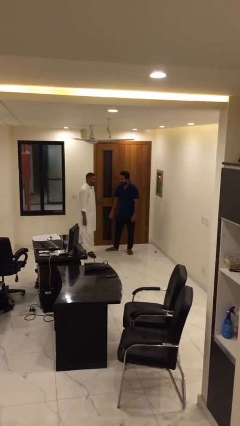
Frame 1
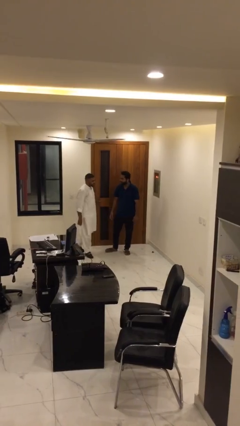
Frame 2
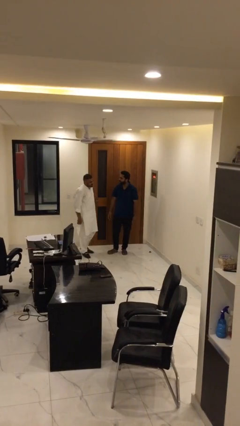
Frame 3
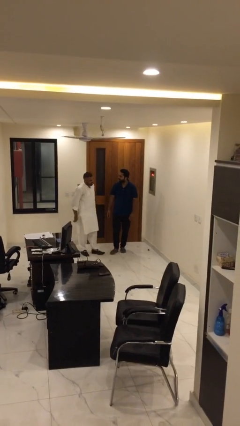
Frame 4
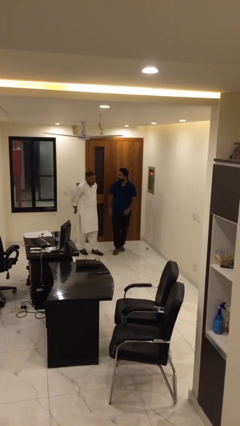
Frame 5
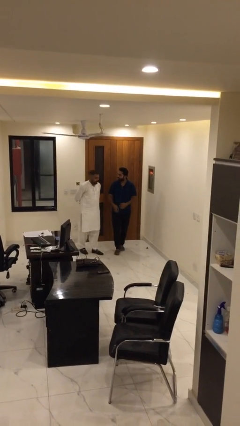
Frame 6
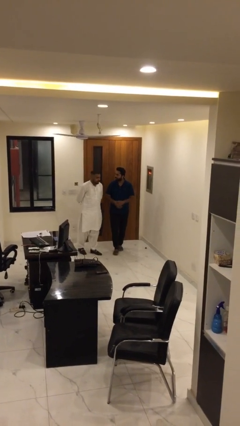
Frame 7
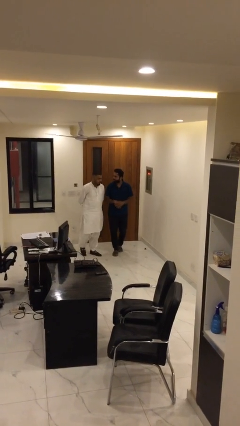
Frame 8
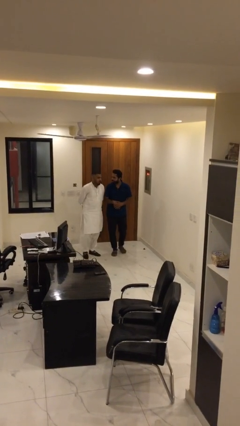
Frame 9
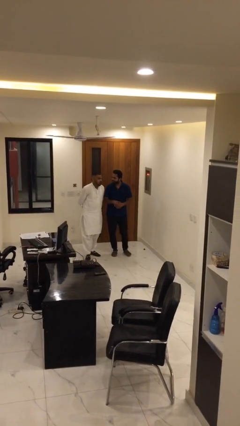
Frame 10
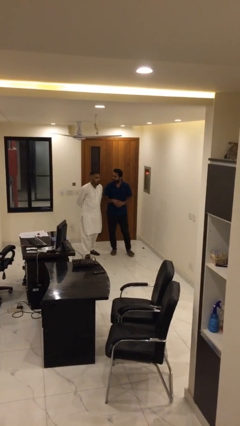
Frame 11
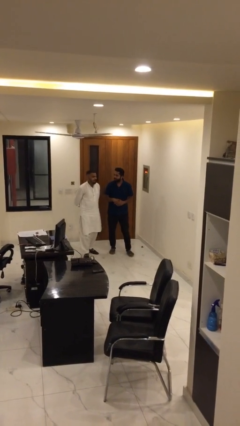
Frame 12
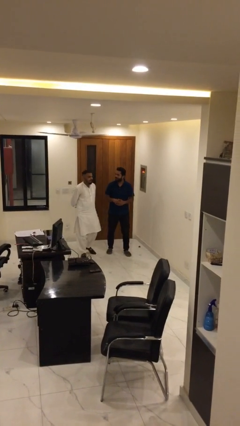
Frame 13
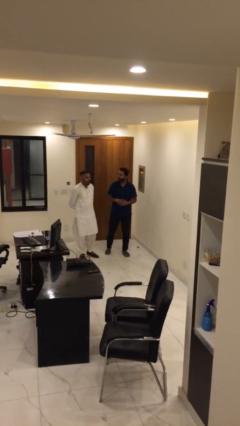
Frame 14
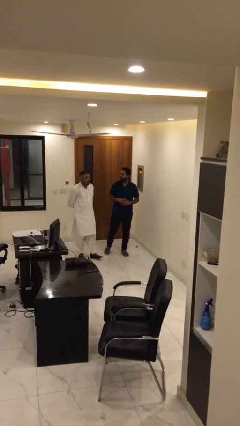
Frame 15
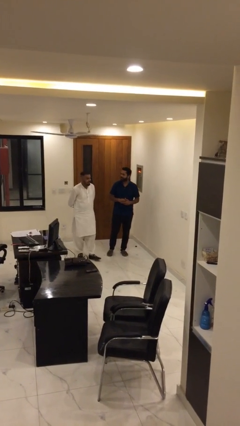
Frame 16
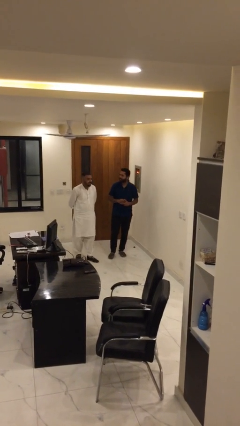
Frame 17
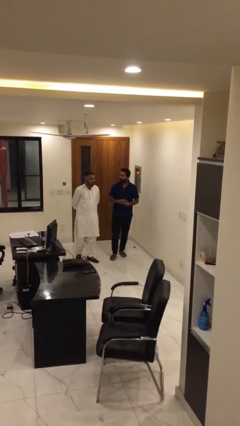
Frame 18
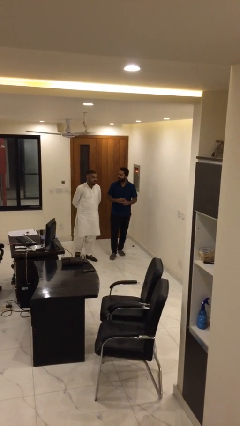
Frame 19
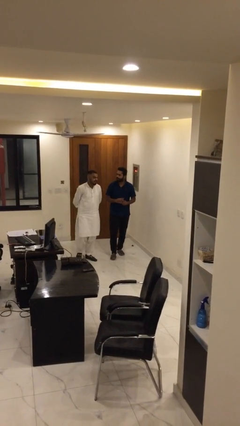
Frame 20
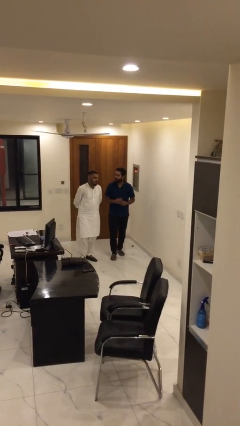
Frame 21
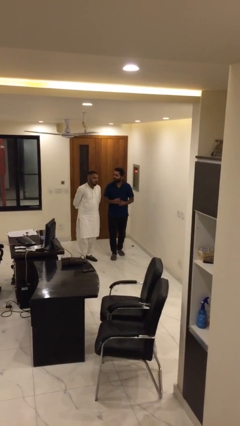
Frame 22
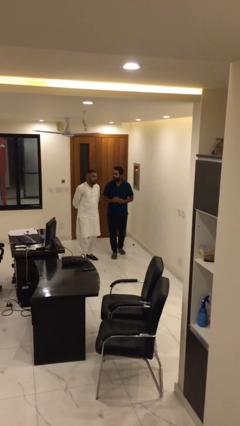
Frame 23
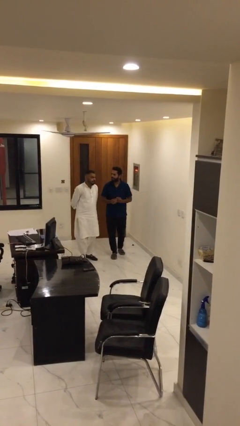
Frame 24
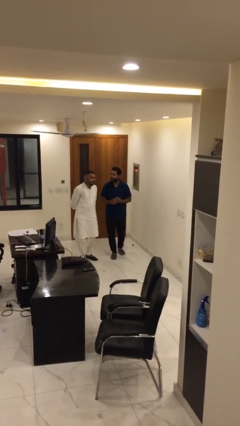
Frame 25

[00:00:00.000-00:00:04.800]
person talks to person

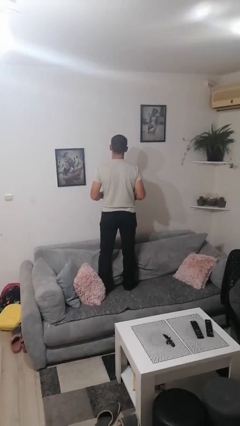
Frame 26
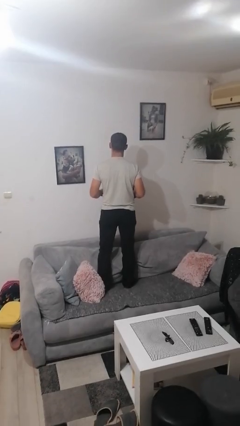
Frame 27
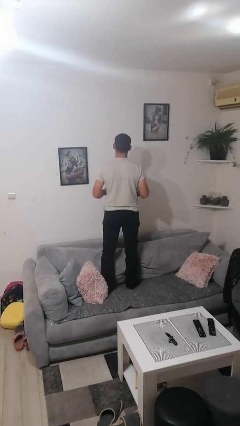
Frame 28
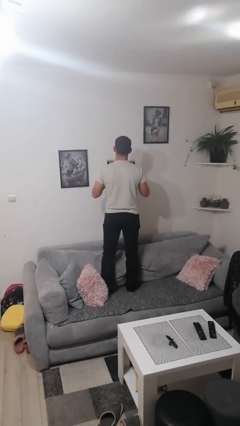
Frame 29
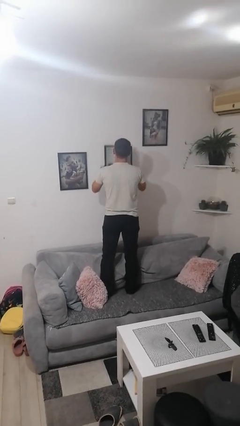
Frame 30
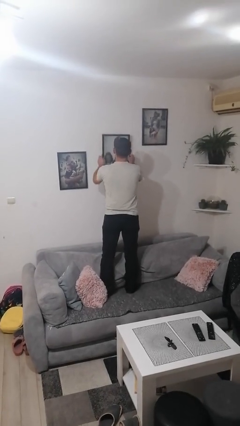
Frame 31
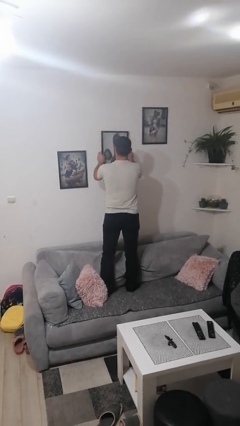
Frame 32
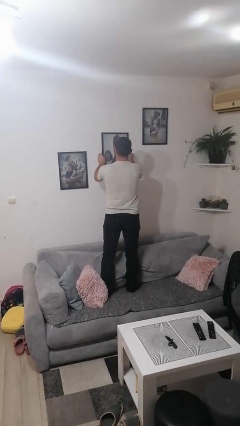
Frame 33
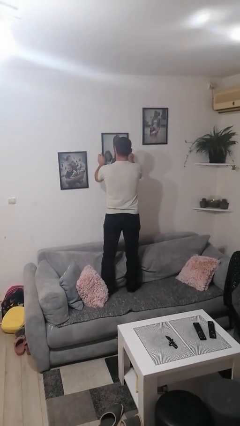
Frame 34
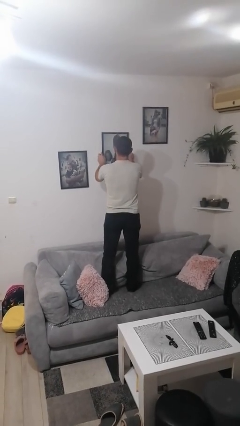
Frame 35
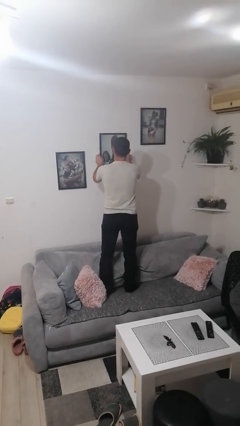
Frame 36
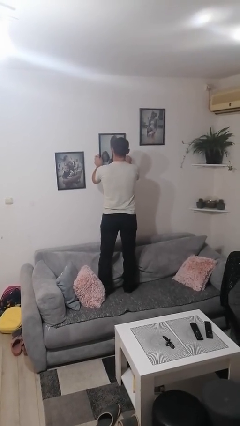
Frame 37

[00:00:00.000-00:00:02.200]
person puts up picture frame

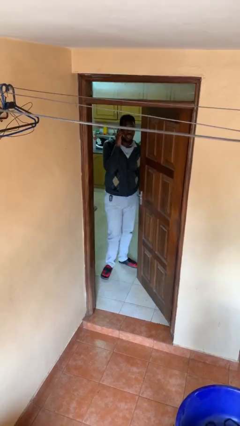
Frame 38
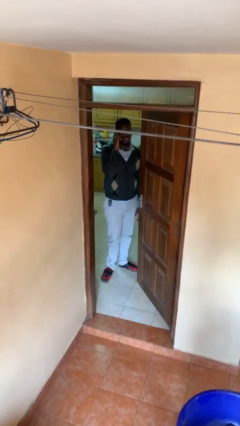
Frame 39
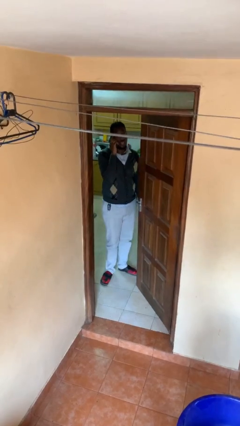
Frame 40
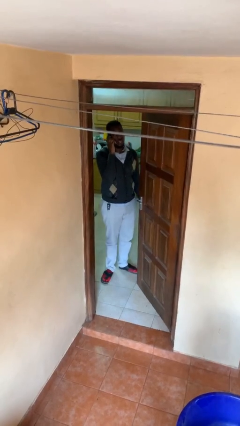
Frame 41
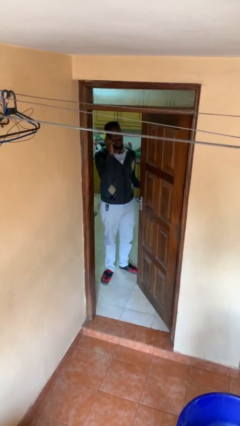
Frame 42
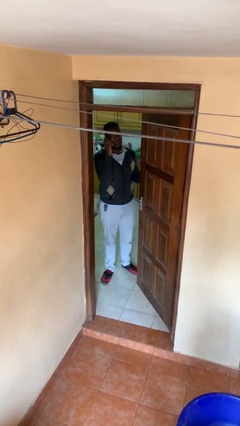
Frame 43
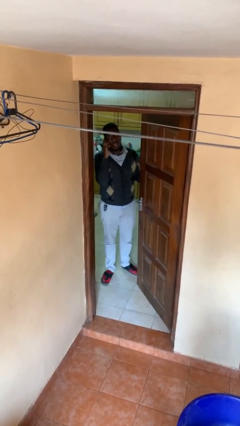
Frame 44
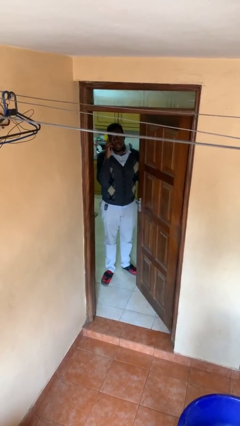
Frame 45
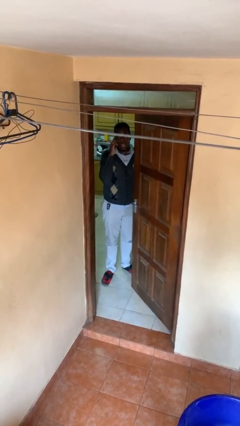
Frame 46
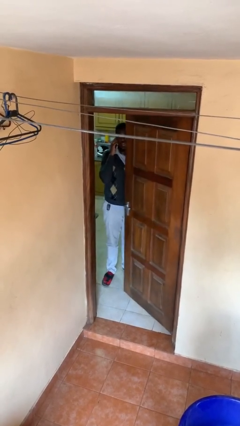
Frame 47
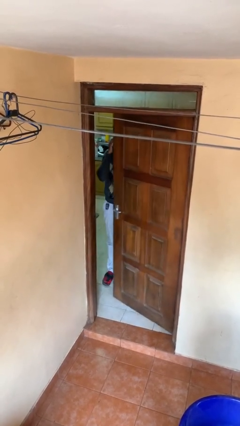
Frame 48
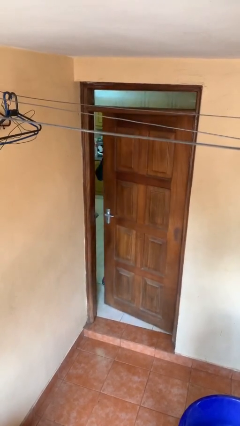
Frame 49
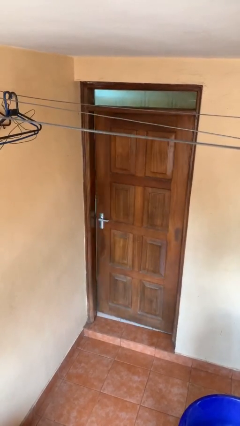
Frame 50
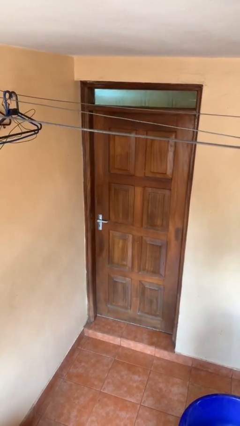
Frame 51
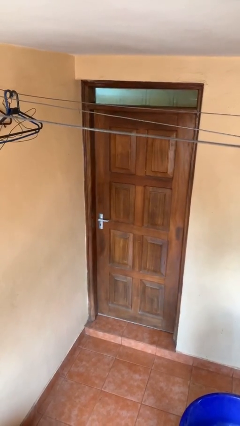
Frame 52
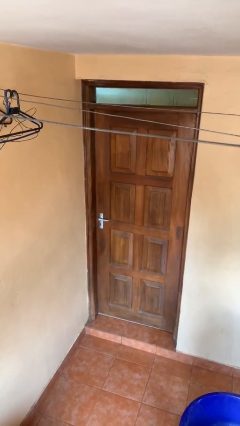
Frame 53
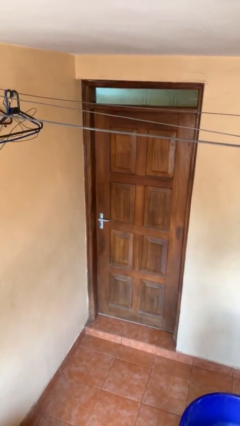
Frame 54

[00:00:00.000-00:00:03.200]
person closes facility door

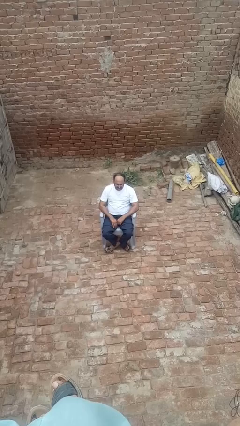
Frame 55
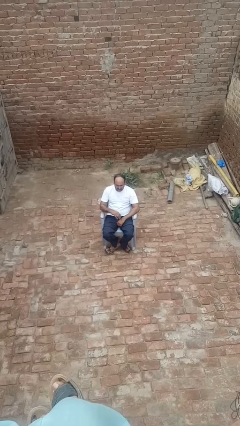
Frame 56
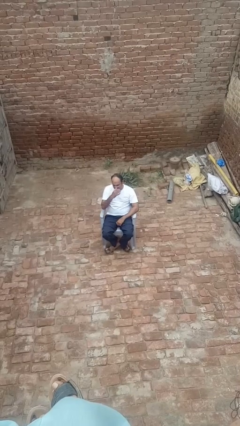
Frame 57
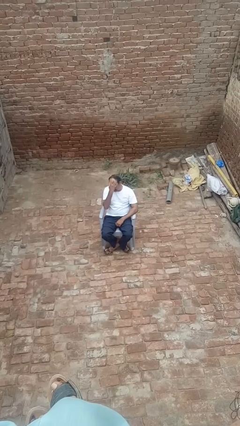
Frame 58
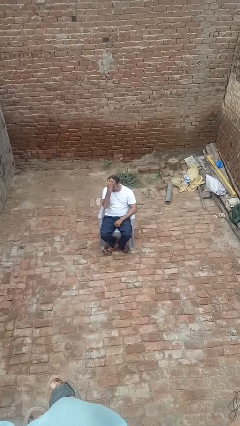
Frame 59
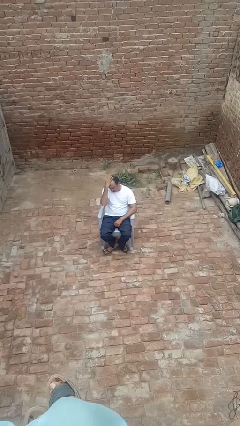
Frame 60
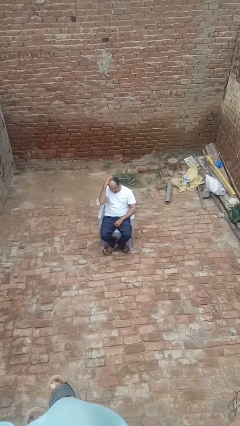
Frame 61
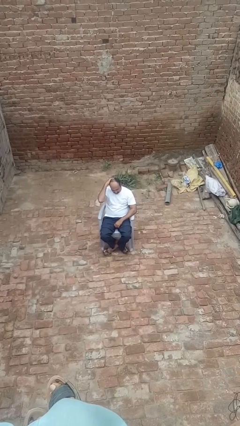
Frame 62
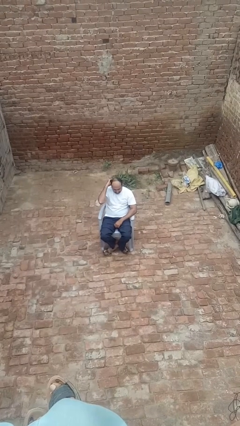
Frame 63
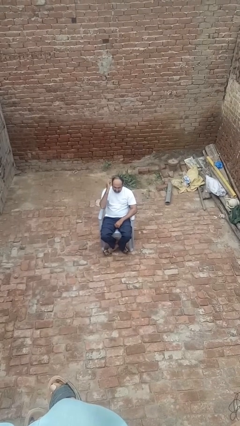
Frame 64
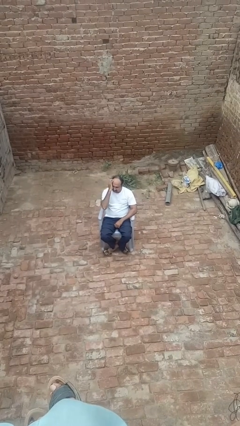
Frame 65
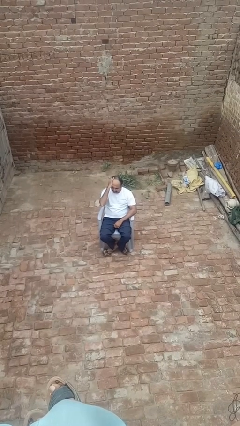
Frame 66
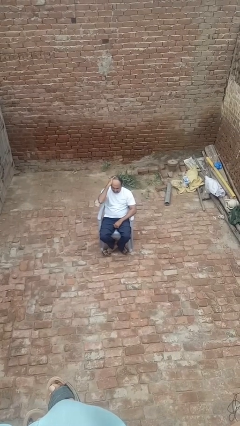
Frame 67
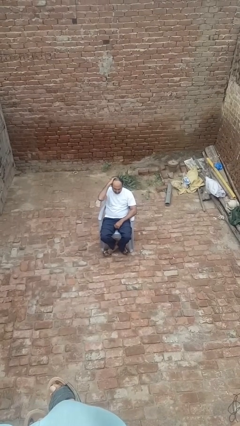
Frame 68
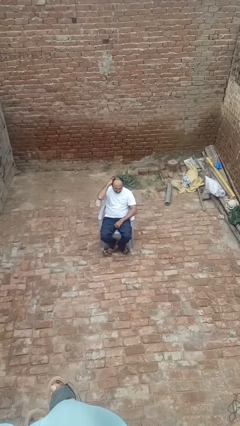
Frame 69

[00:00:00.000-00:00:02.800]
person strokes hair

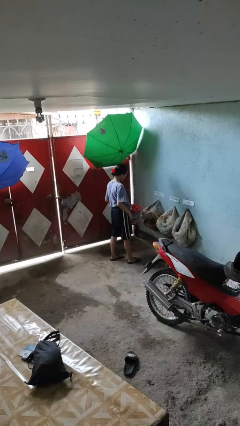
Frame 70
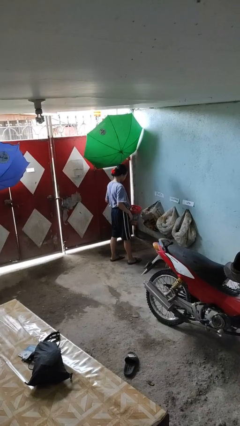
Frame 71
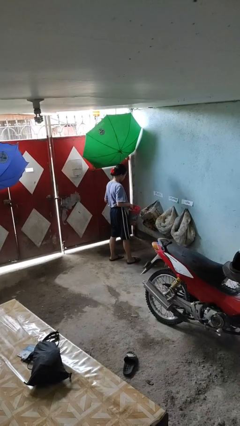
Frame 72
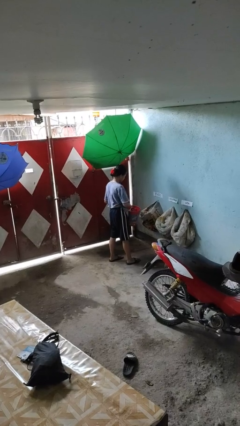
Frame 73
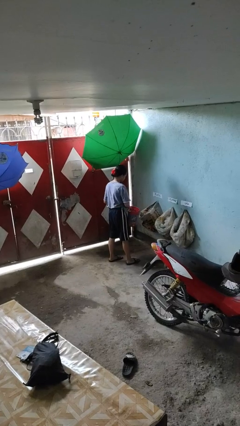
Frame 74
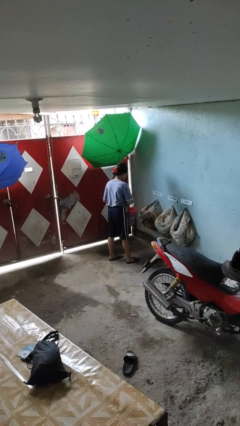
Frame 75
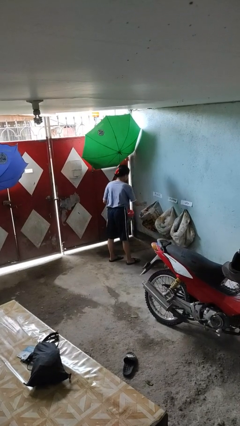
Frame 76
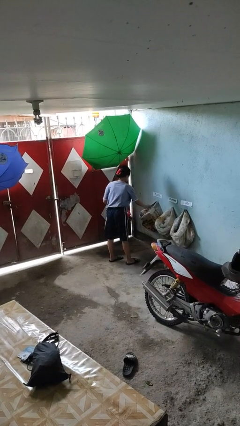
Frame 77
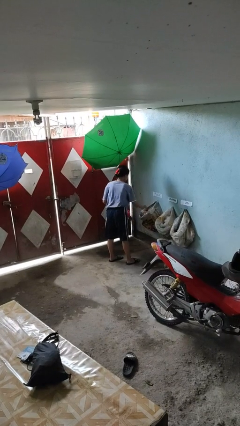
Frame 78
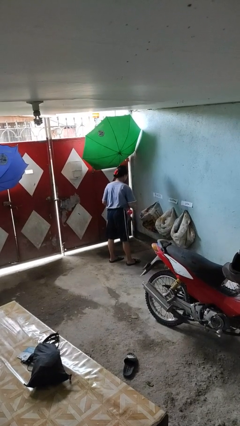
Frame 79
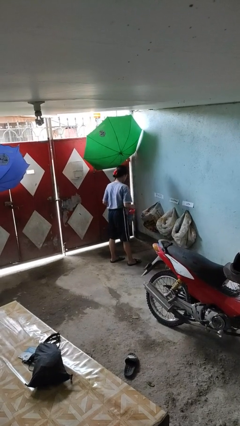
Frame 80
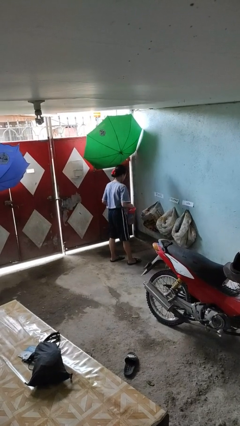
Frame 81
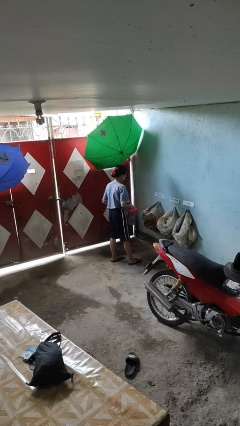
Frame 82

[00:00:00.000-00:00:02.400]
person discards trash

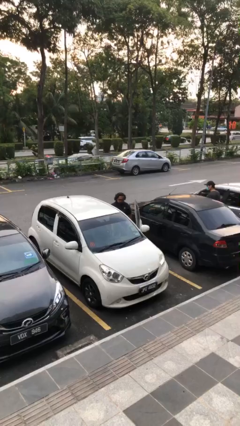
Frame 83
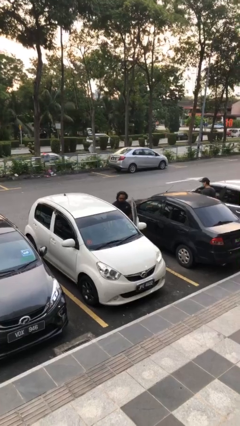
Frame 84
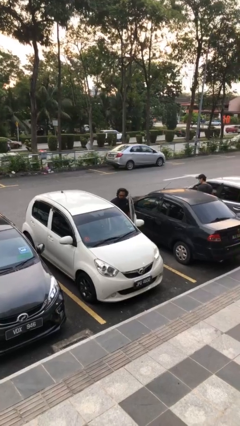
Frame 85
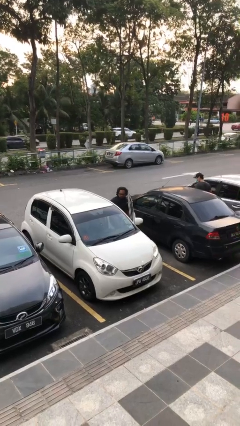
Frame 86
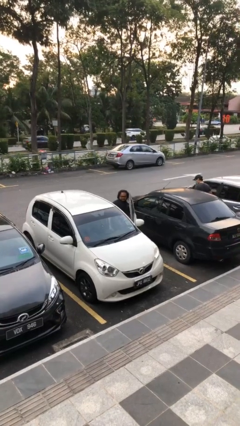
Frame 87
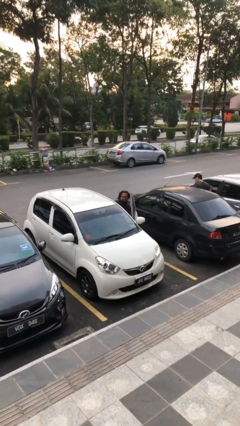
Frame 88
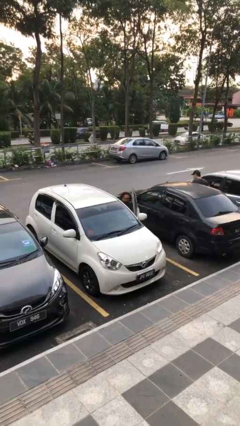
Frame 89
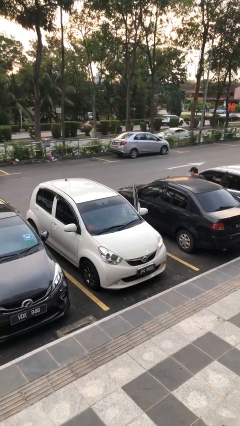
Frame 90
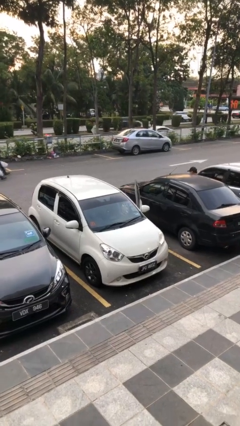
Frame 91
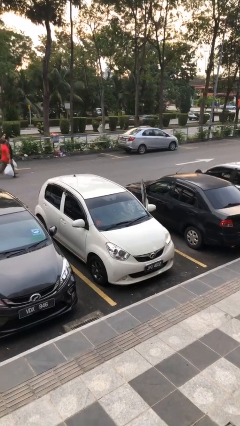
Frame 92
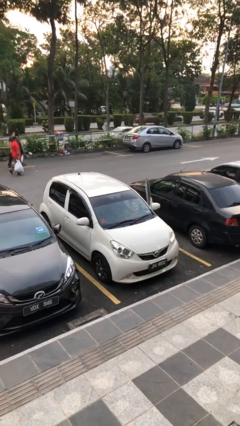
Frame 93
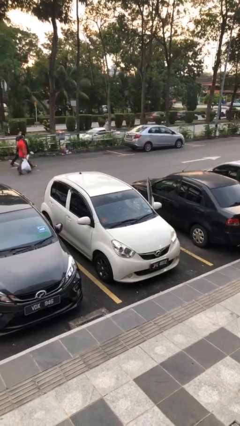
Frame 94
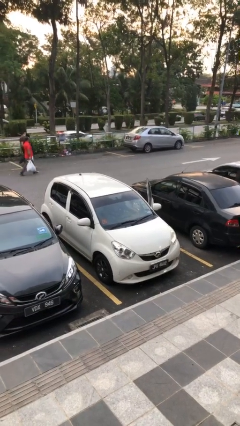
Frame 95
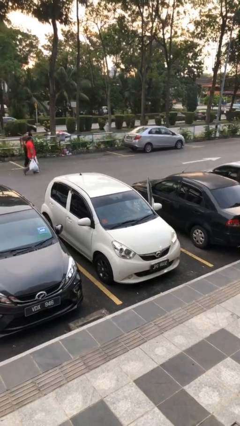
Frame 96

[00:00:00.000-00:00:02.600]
person enters car
